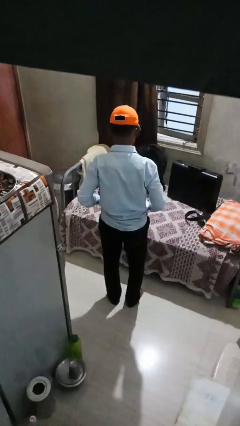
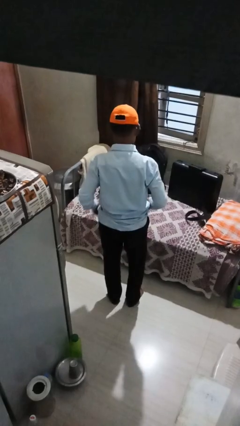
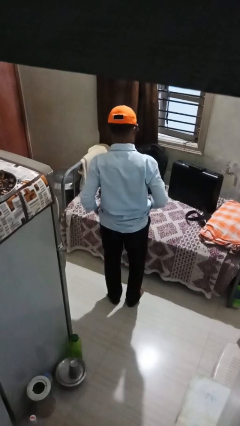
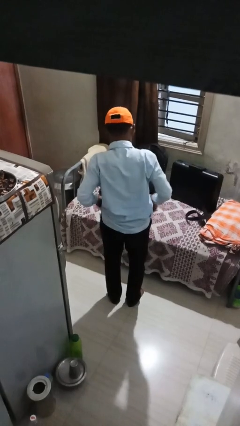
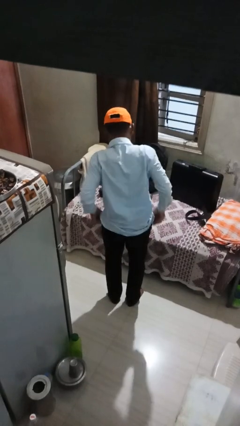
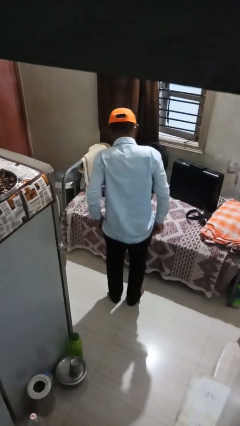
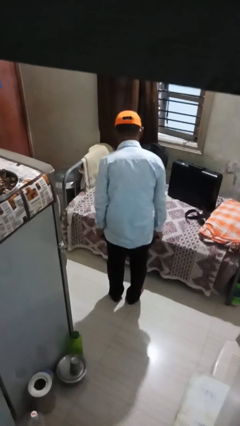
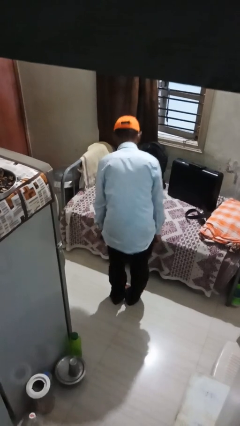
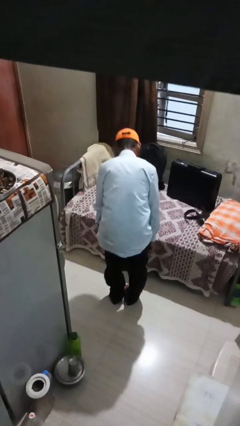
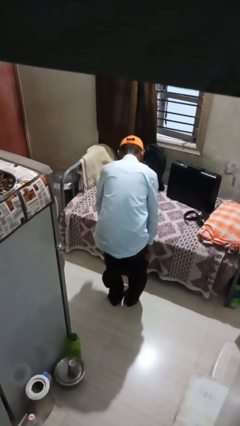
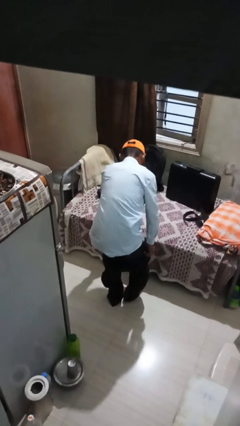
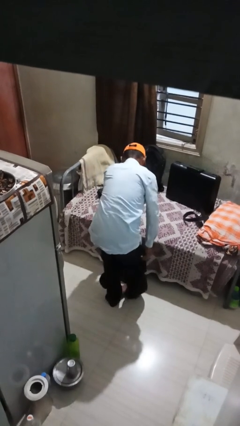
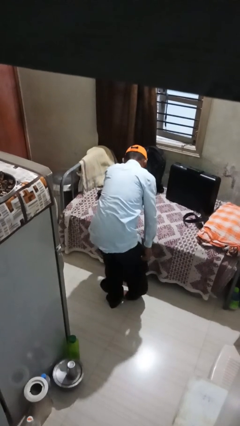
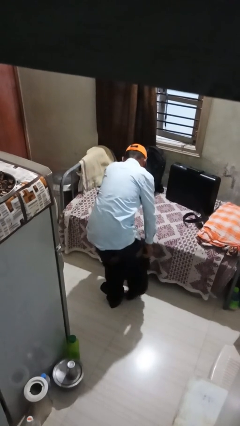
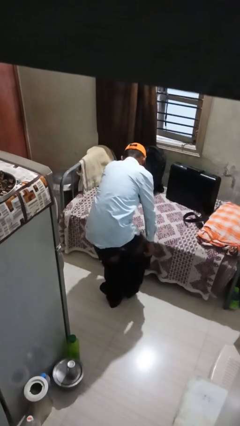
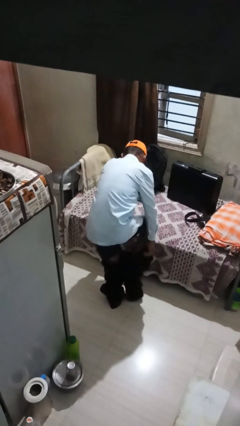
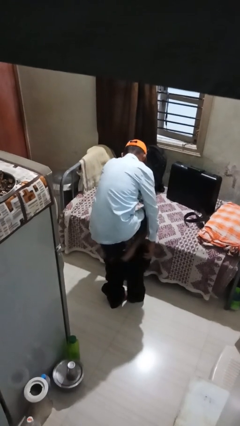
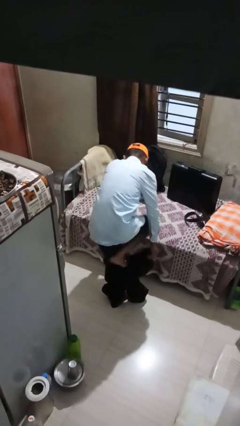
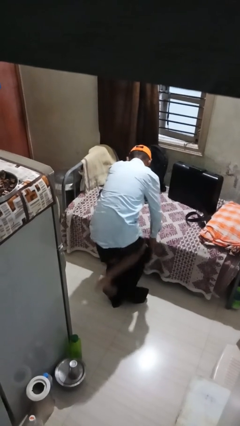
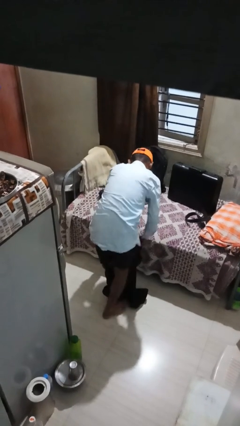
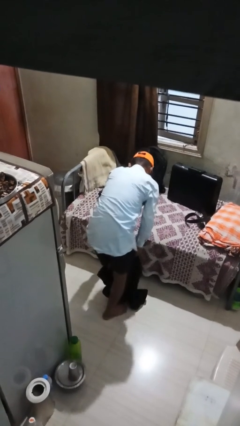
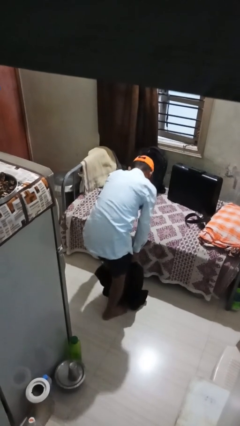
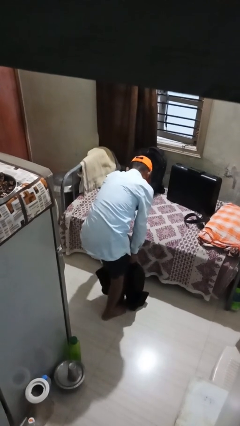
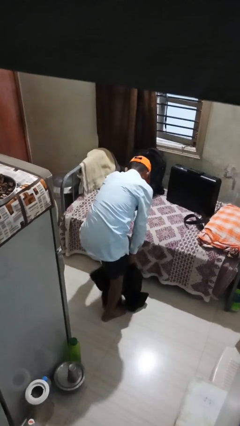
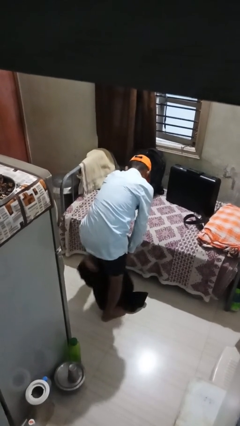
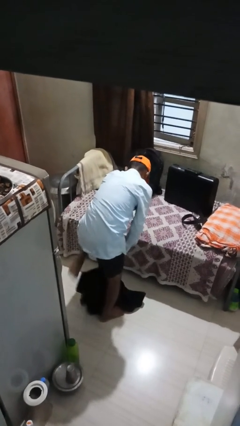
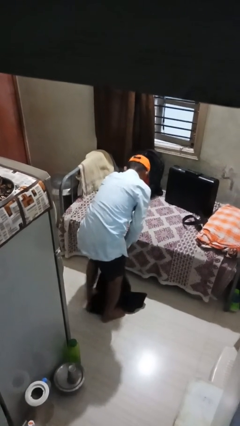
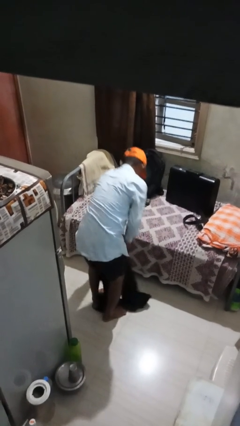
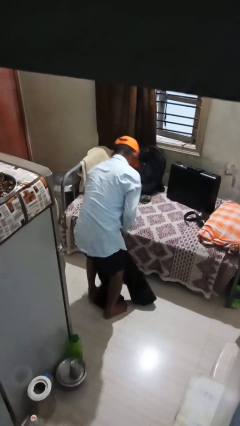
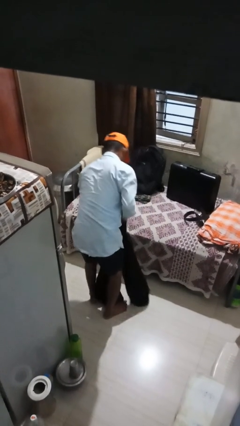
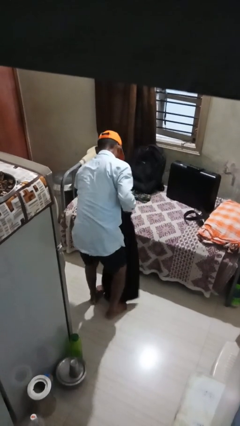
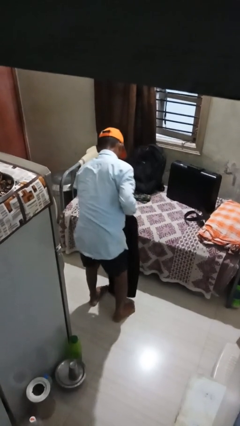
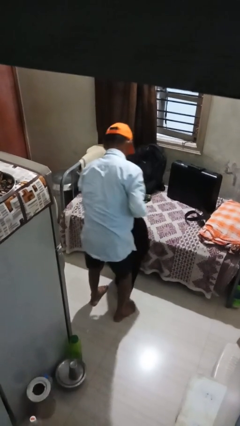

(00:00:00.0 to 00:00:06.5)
person takes off pants

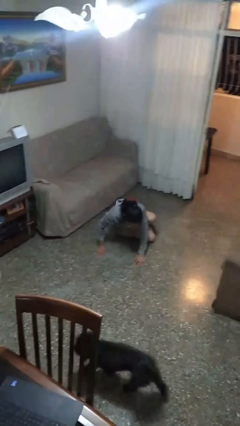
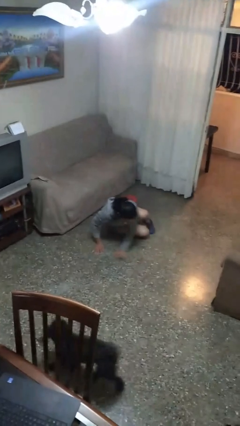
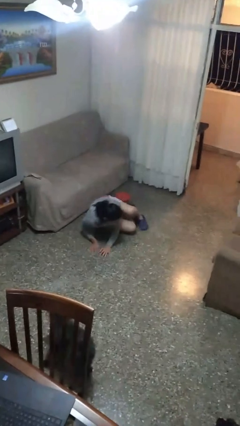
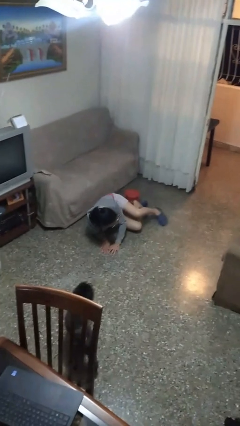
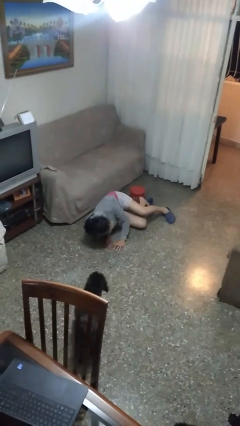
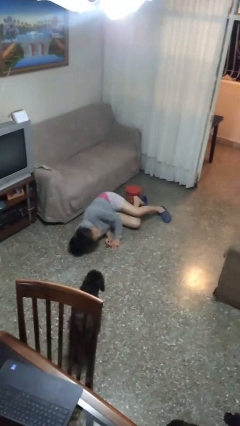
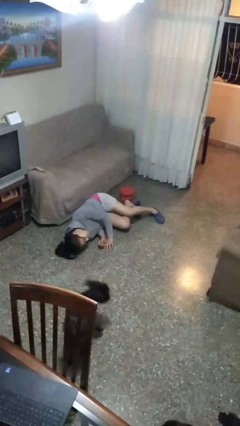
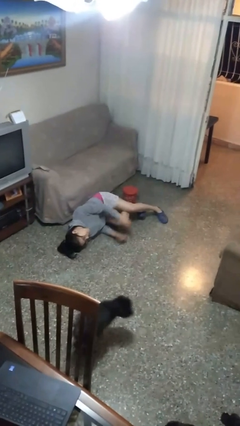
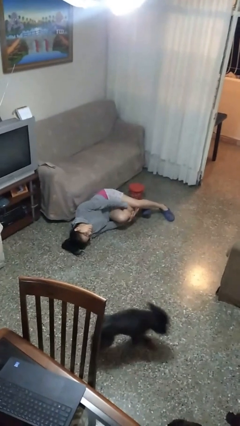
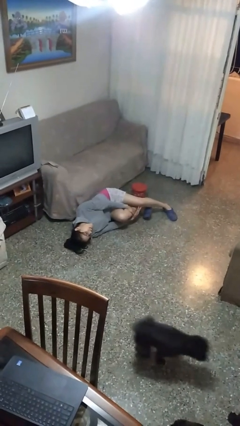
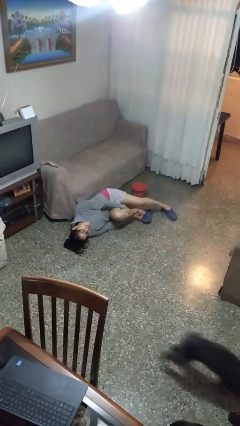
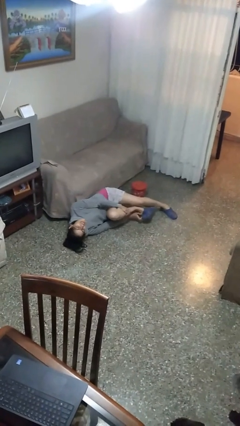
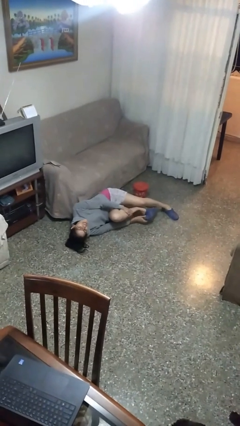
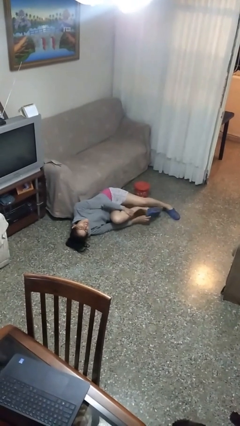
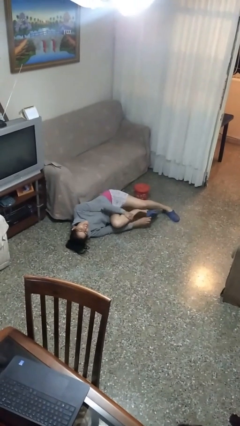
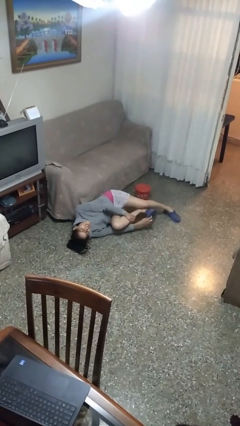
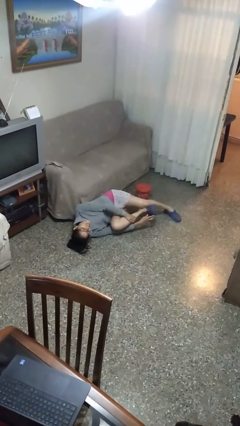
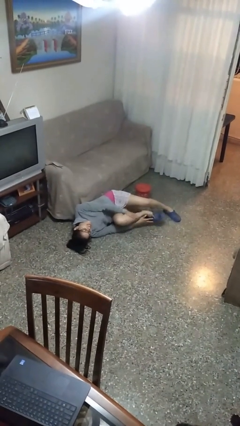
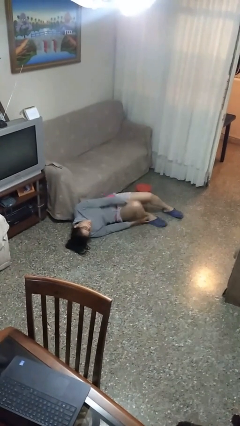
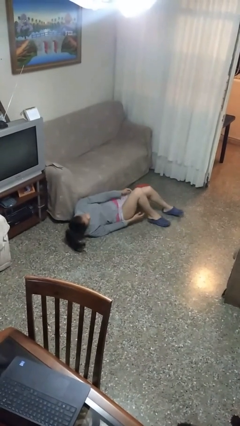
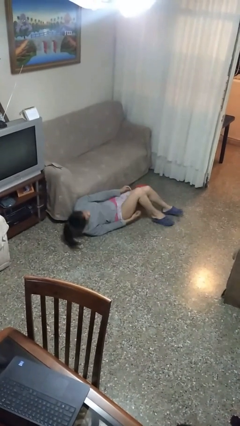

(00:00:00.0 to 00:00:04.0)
person lies down on floor

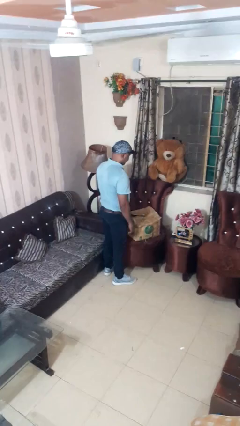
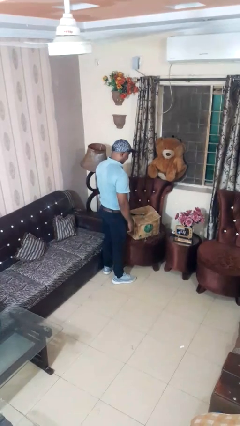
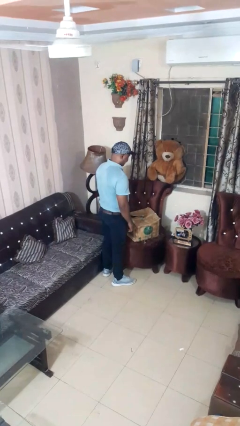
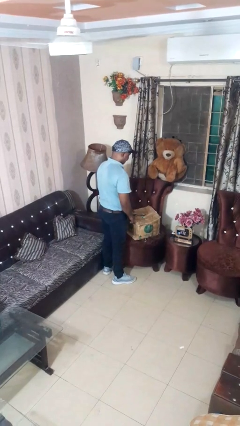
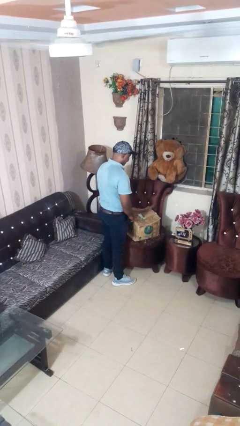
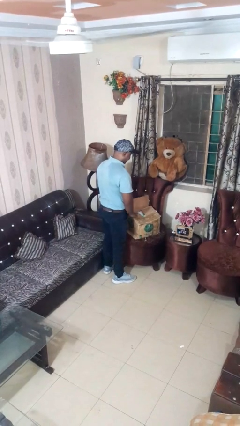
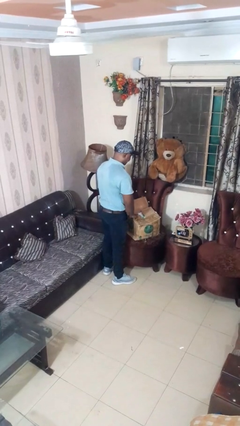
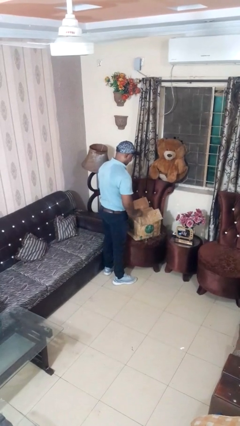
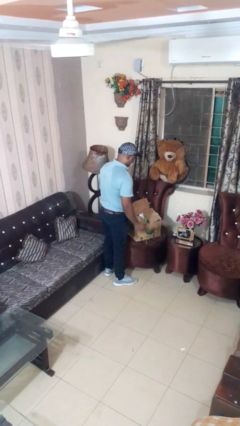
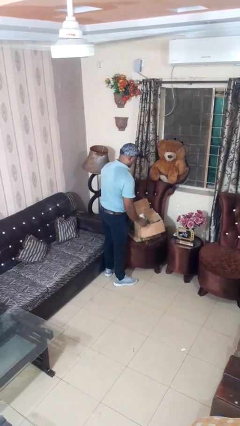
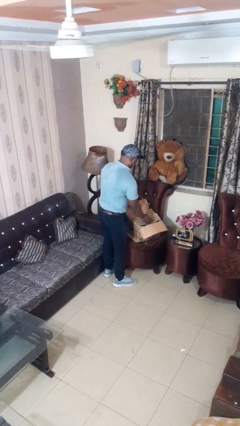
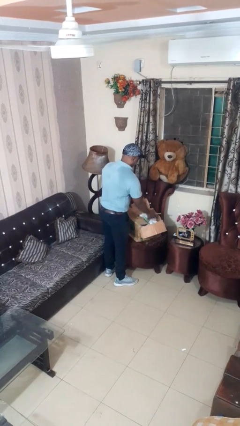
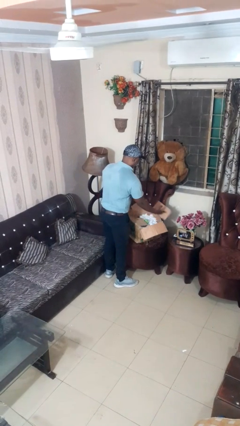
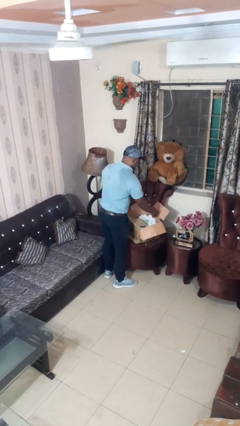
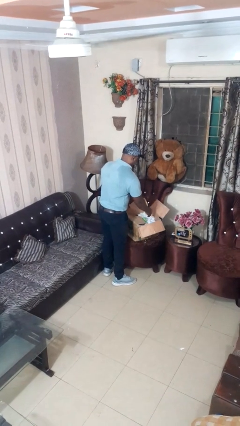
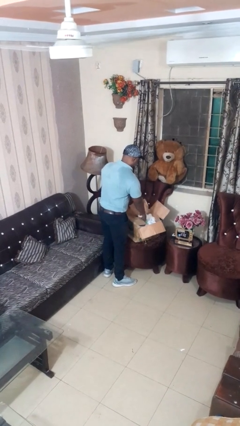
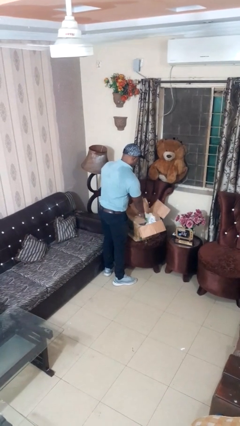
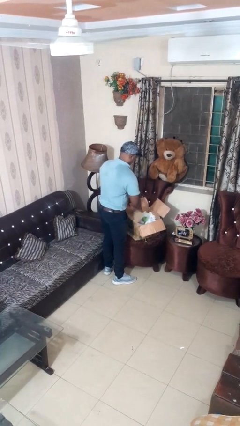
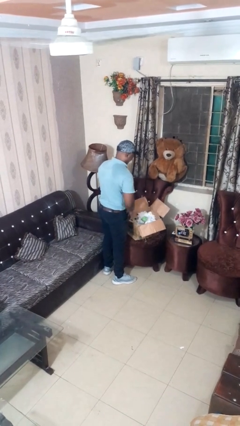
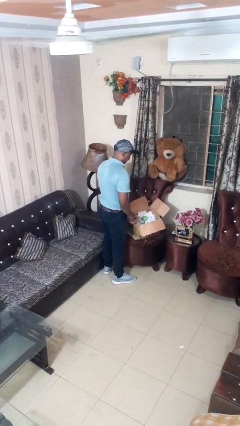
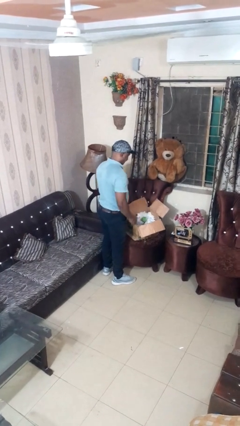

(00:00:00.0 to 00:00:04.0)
person opens box

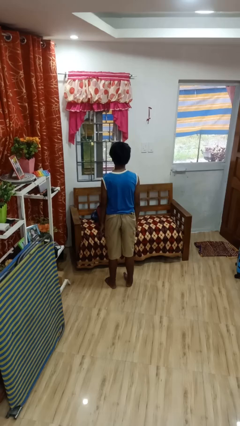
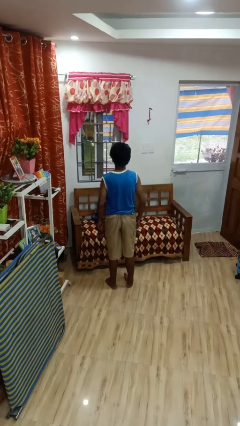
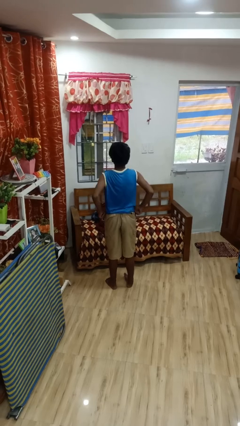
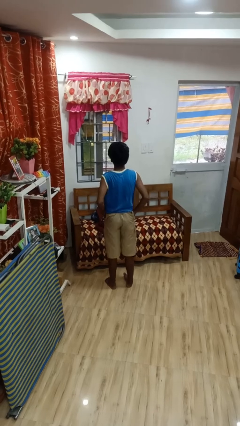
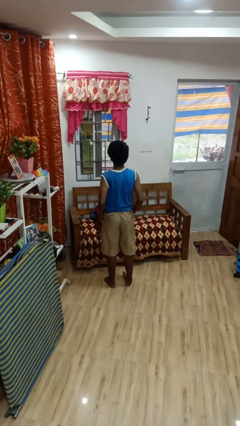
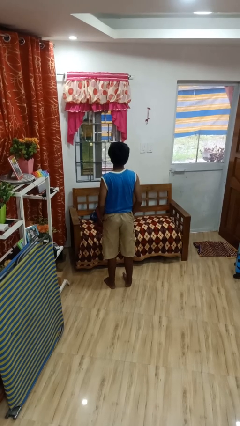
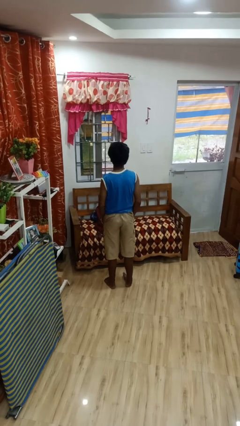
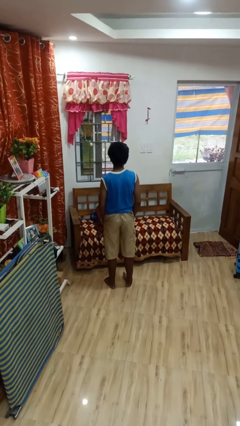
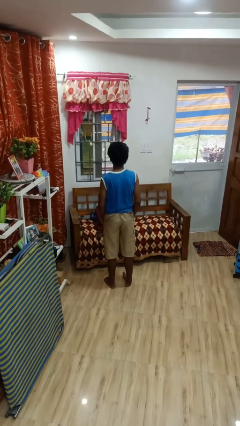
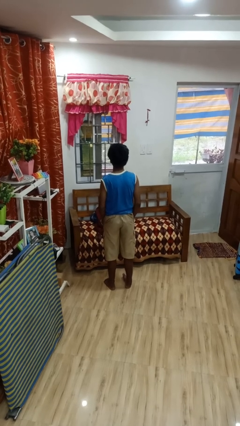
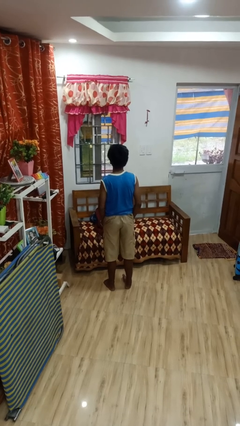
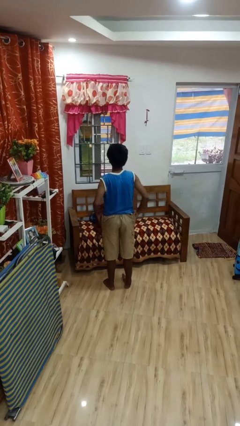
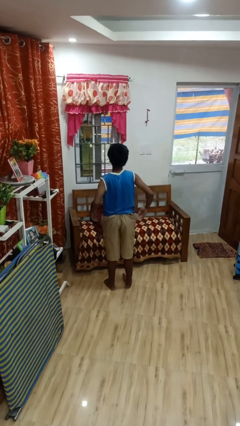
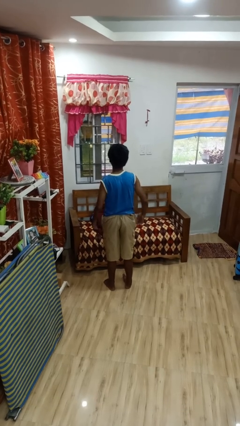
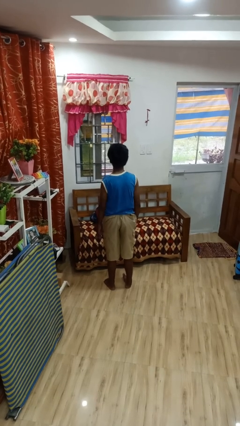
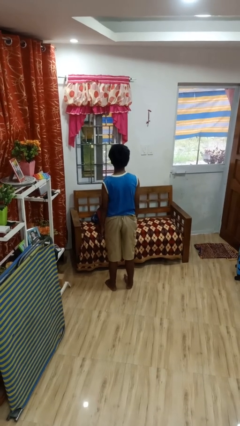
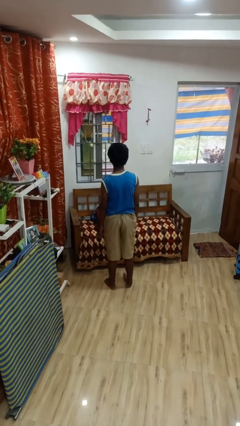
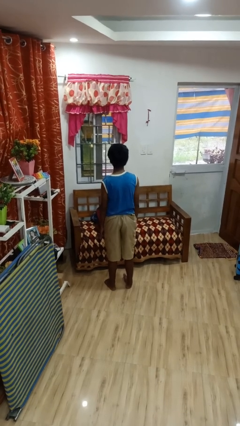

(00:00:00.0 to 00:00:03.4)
person puts hands in back pockets

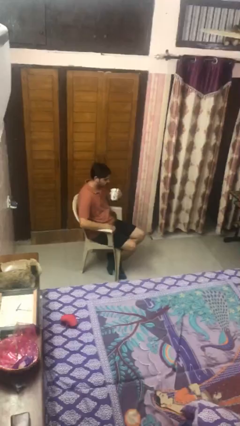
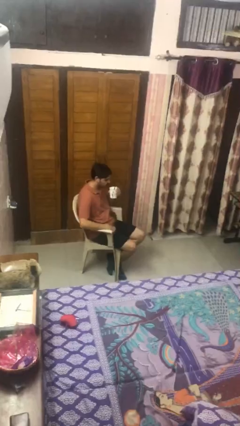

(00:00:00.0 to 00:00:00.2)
person drinks from mug
